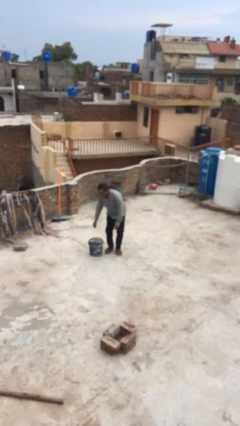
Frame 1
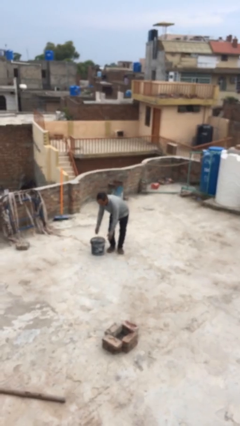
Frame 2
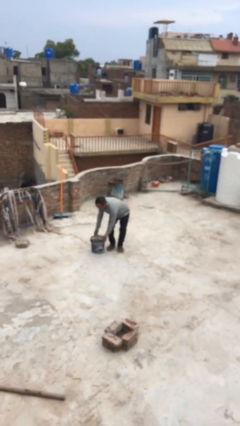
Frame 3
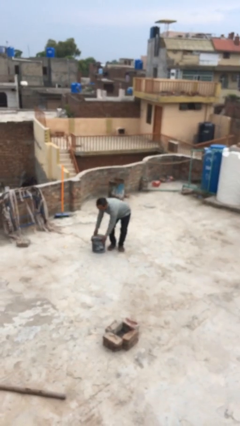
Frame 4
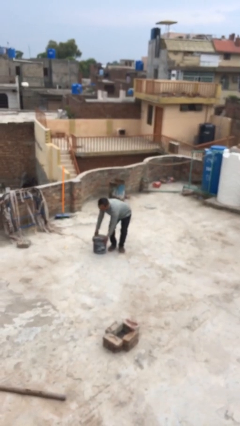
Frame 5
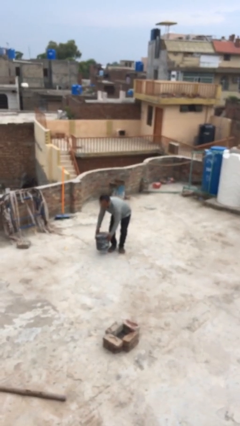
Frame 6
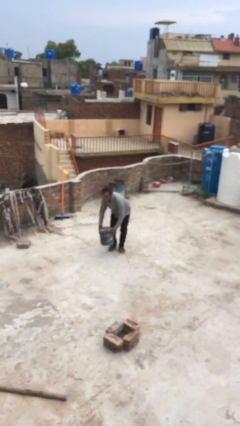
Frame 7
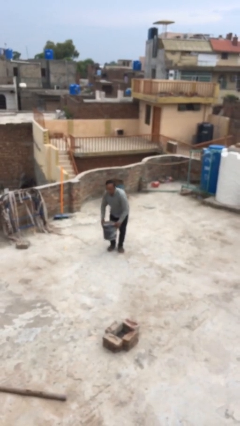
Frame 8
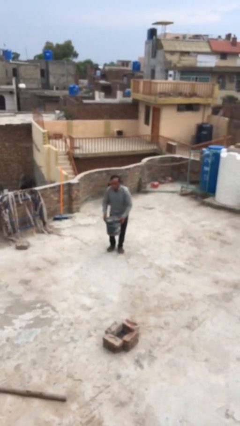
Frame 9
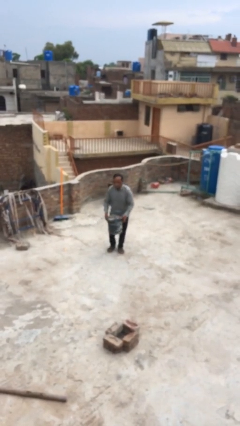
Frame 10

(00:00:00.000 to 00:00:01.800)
person picks up object from floor

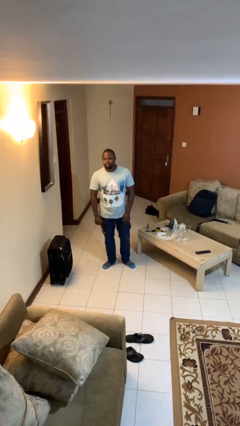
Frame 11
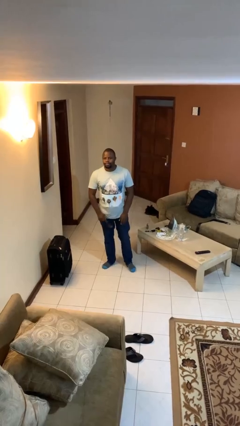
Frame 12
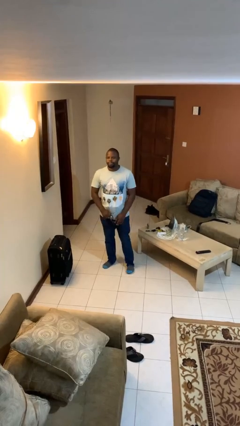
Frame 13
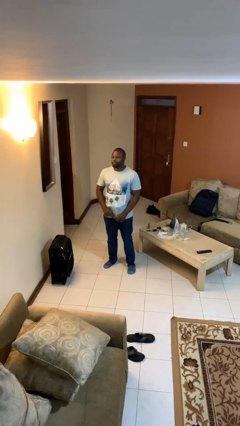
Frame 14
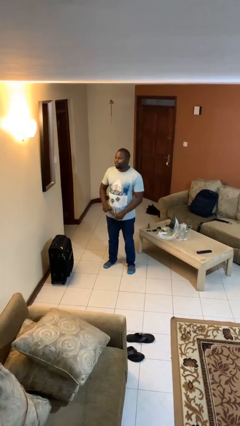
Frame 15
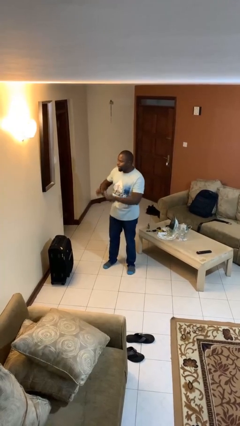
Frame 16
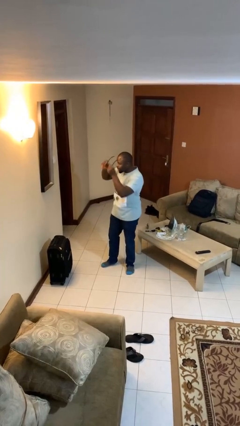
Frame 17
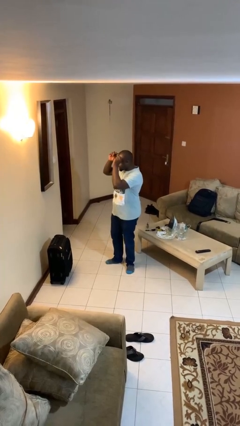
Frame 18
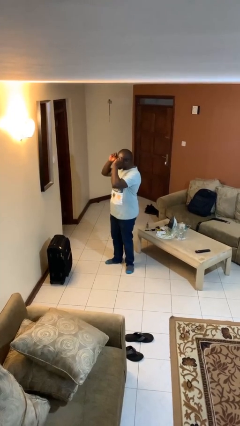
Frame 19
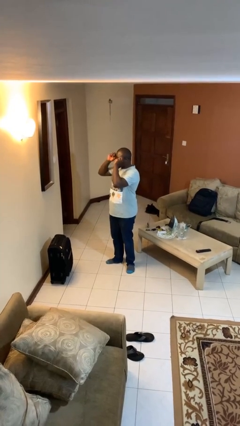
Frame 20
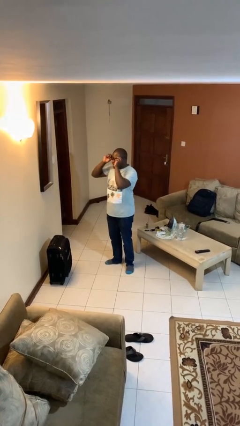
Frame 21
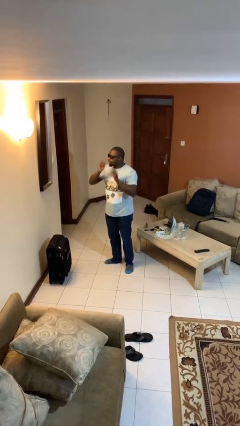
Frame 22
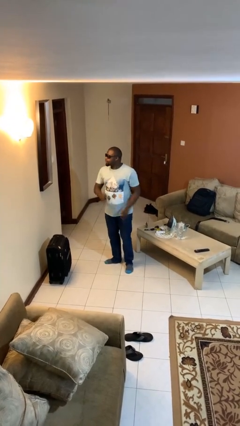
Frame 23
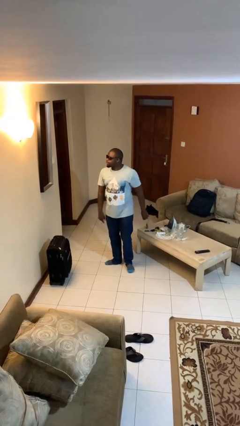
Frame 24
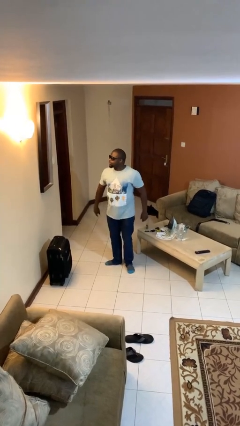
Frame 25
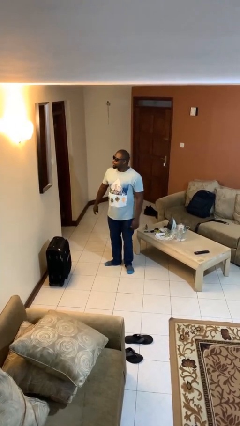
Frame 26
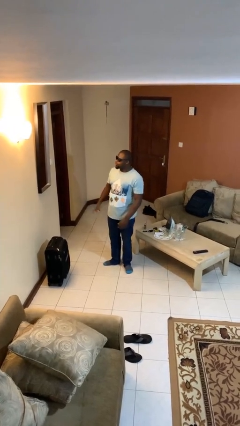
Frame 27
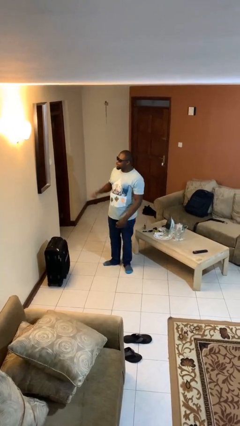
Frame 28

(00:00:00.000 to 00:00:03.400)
person puts on sunglasses

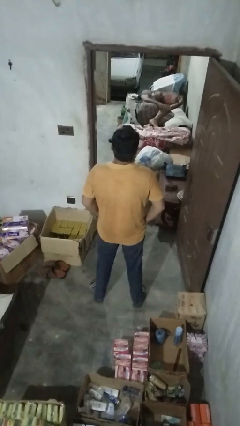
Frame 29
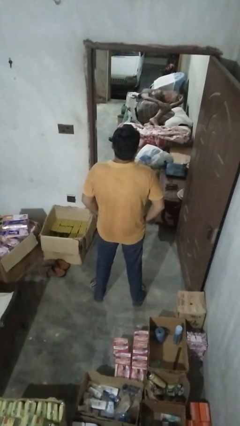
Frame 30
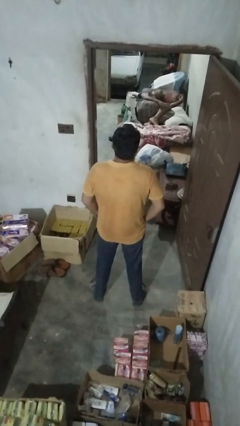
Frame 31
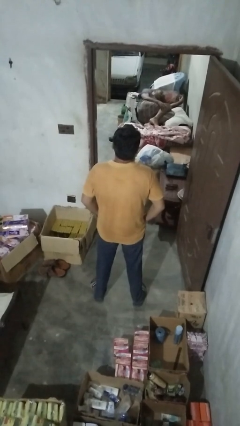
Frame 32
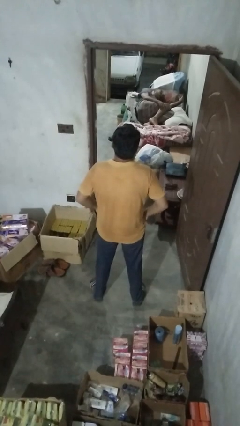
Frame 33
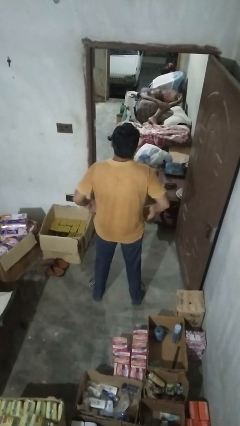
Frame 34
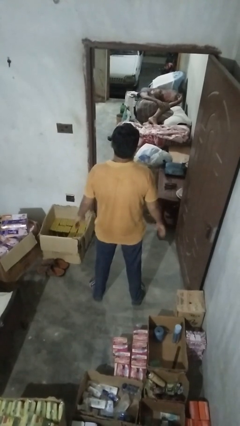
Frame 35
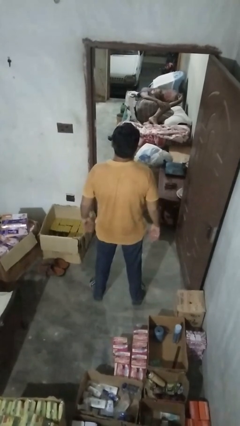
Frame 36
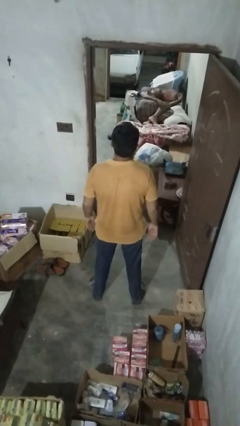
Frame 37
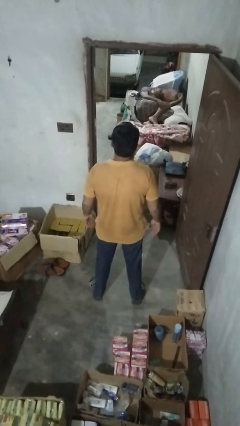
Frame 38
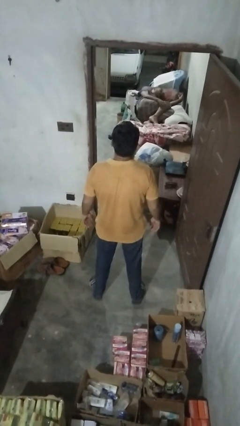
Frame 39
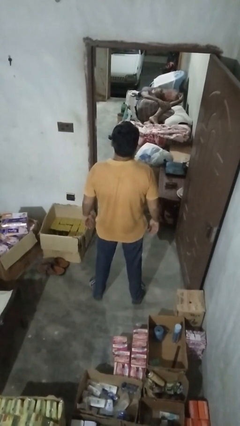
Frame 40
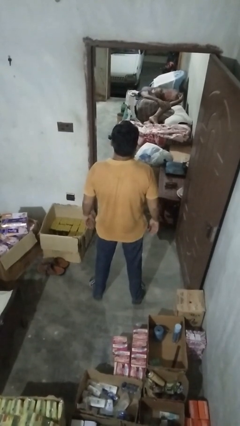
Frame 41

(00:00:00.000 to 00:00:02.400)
person puts hands in back pockets

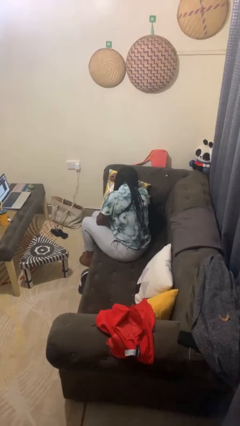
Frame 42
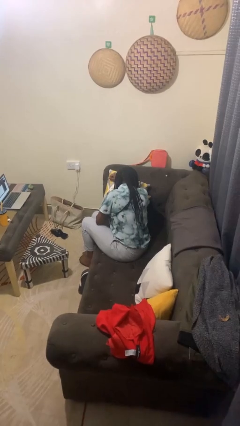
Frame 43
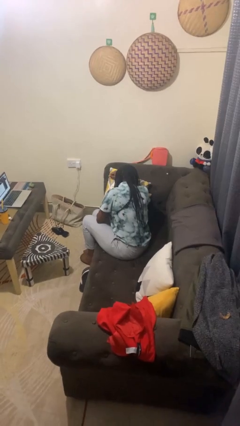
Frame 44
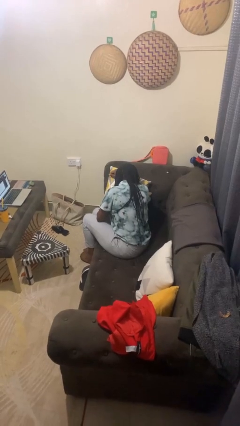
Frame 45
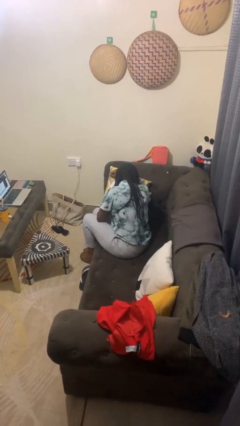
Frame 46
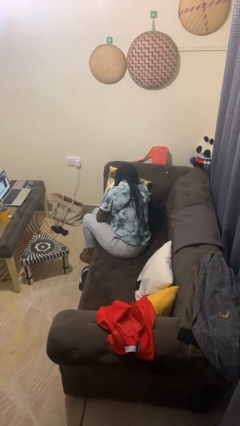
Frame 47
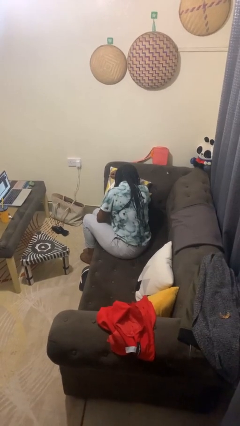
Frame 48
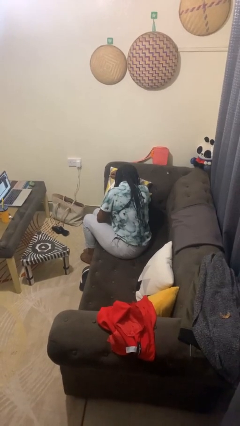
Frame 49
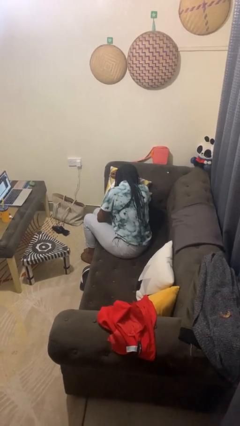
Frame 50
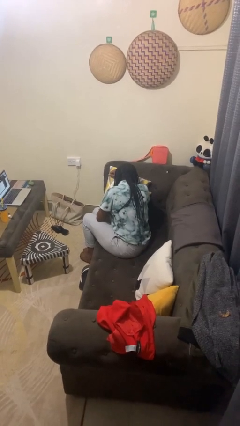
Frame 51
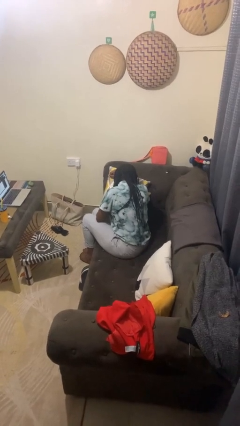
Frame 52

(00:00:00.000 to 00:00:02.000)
person lies down on couch

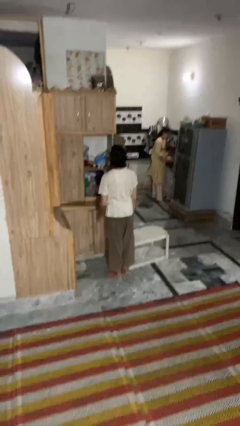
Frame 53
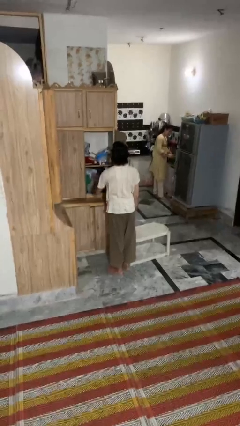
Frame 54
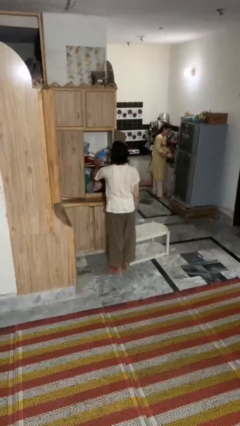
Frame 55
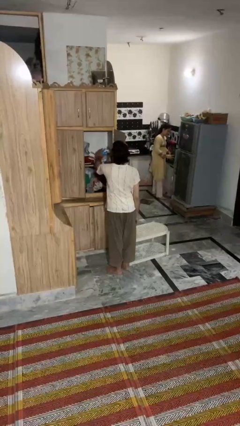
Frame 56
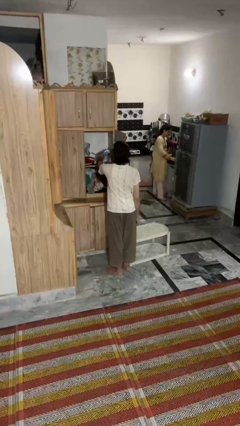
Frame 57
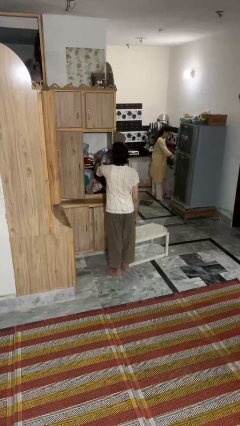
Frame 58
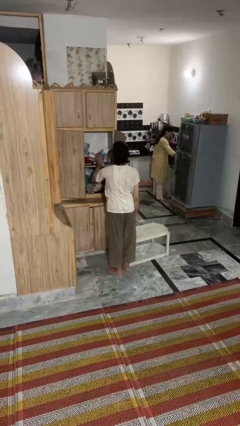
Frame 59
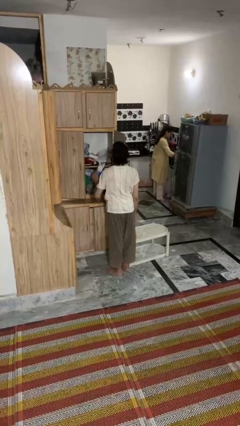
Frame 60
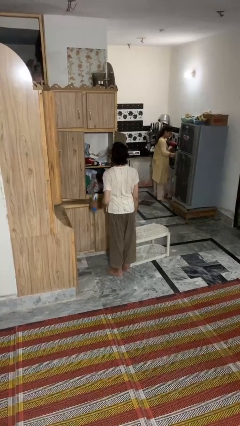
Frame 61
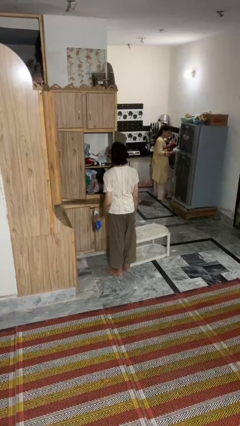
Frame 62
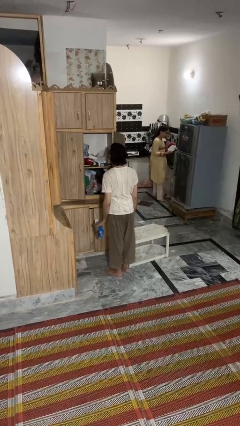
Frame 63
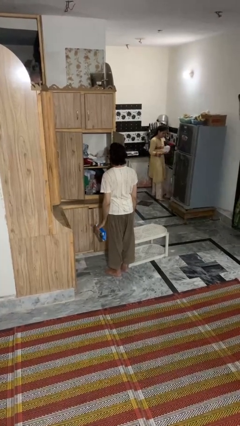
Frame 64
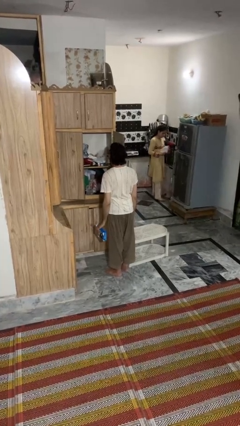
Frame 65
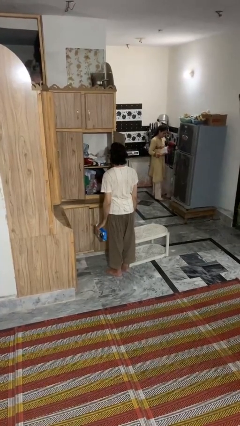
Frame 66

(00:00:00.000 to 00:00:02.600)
person picks up object from cabinet

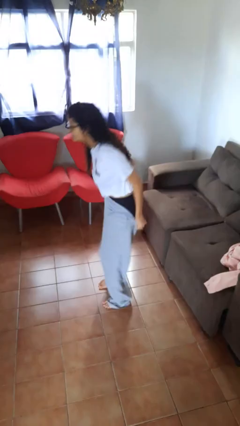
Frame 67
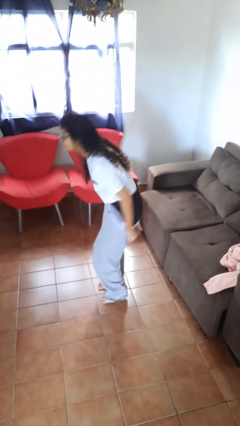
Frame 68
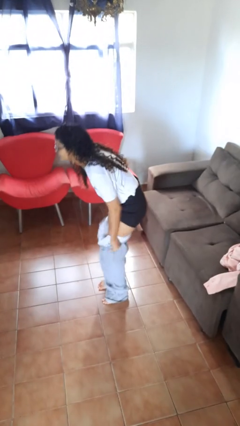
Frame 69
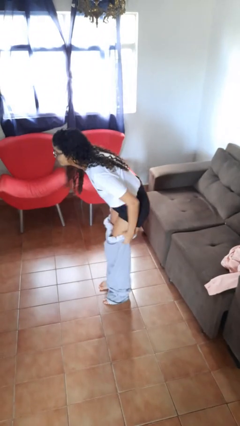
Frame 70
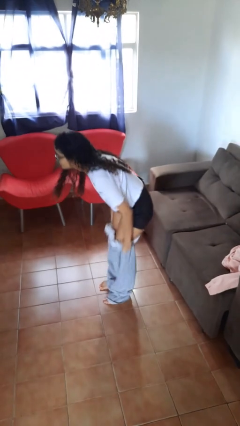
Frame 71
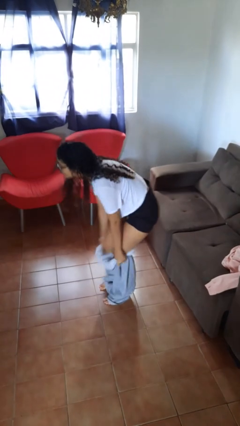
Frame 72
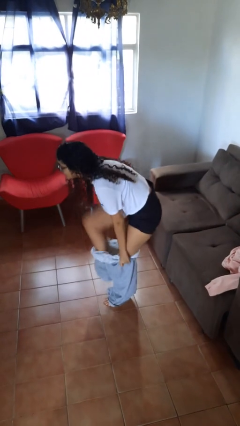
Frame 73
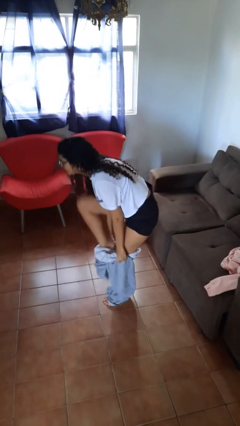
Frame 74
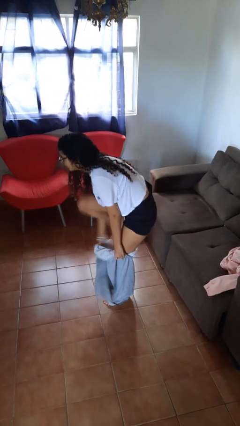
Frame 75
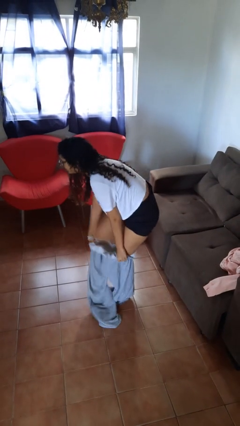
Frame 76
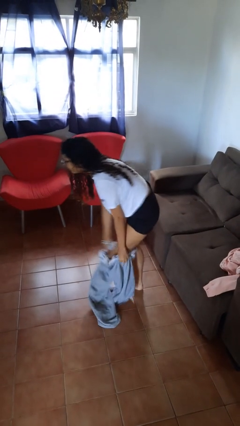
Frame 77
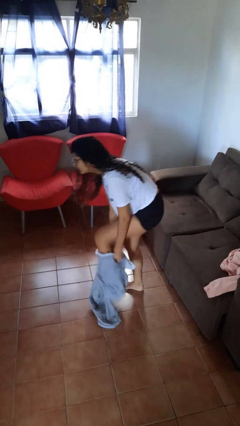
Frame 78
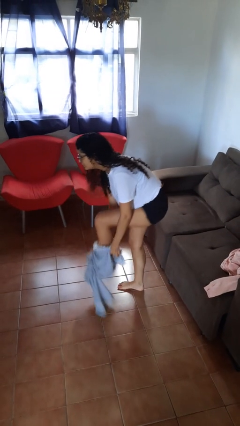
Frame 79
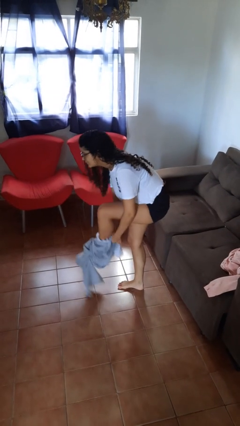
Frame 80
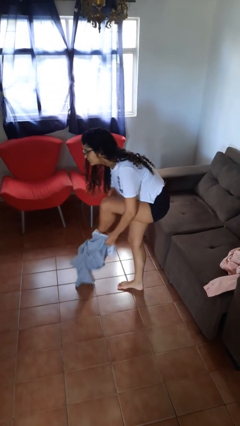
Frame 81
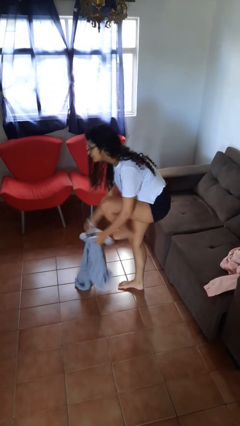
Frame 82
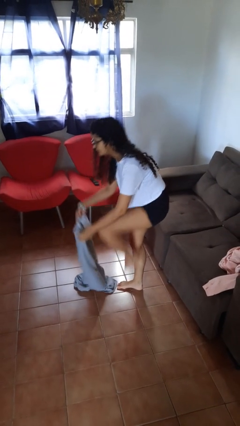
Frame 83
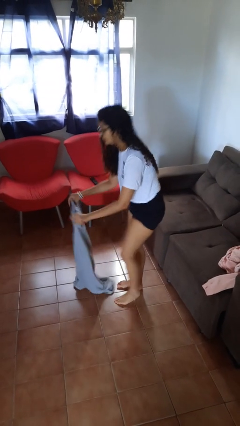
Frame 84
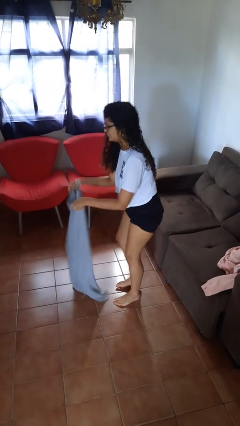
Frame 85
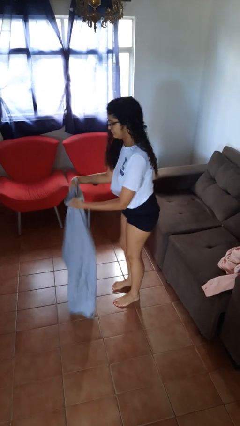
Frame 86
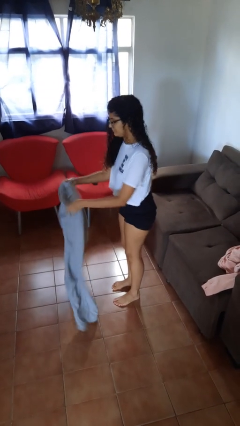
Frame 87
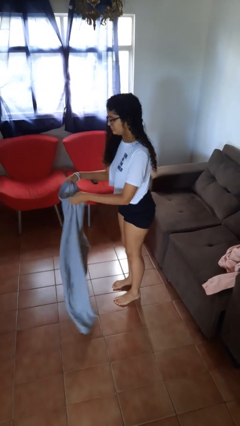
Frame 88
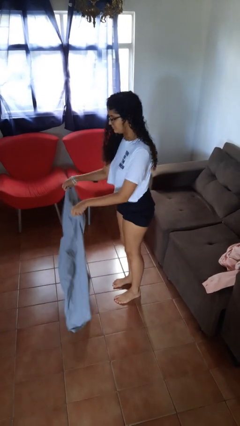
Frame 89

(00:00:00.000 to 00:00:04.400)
person takes off pants

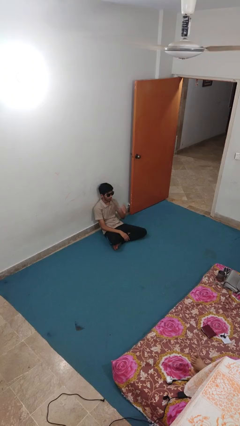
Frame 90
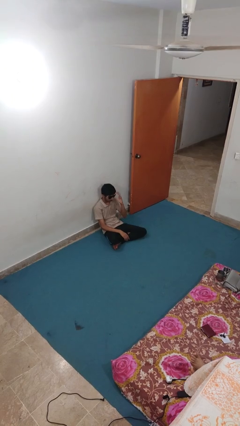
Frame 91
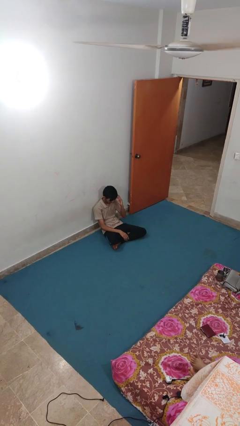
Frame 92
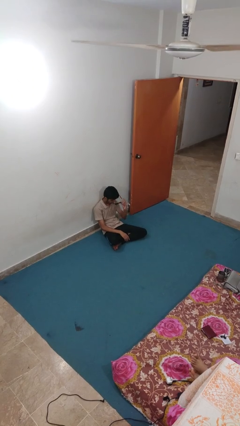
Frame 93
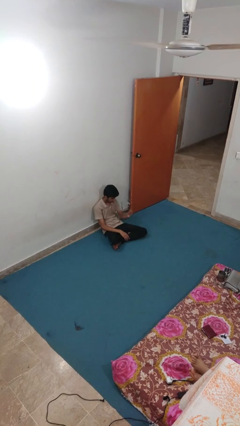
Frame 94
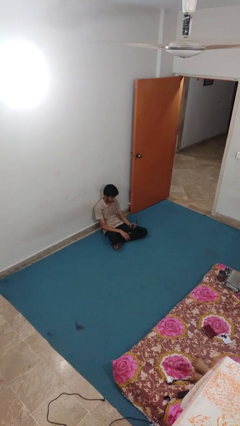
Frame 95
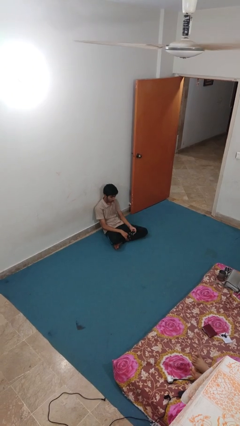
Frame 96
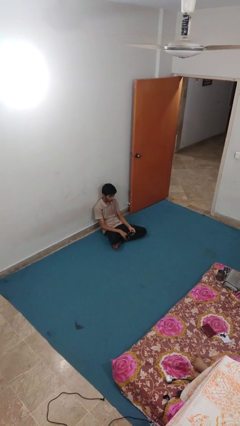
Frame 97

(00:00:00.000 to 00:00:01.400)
person takes off sunglasses
